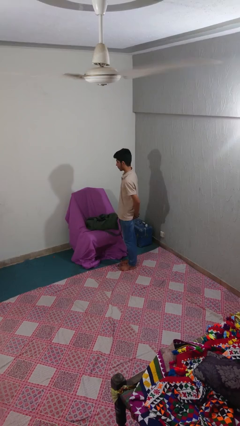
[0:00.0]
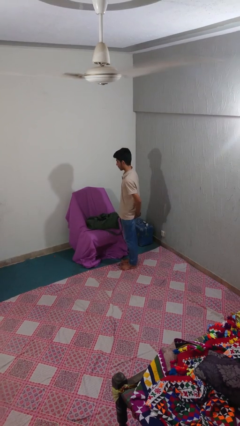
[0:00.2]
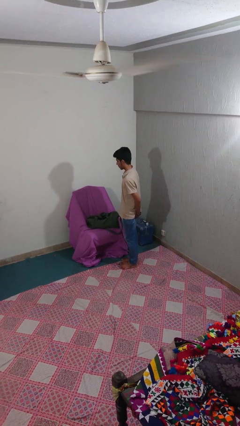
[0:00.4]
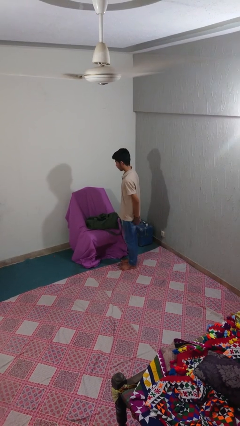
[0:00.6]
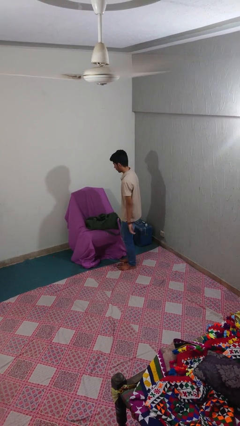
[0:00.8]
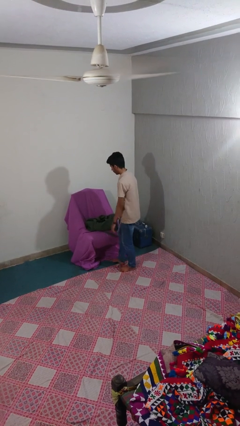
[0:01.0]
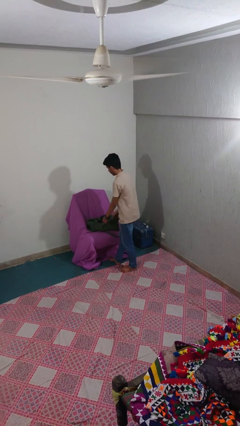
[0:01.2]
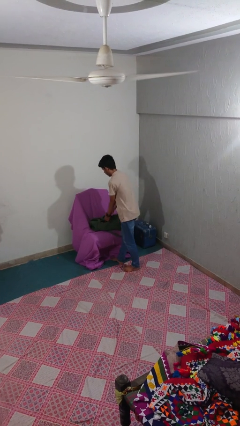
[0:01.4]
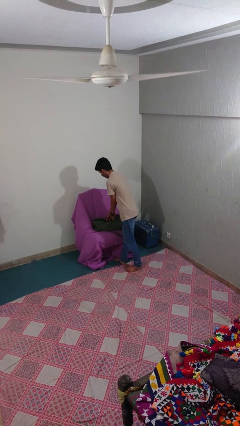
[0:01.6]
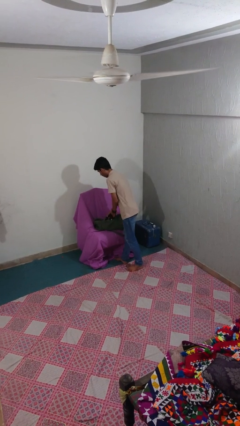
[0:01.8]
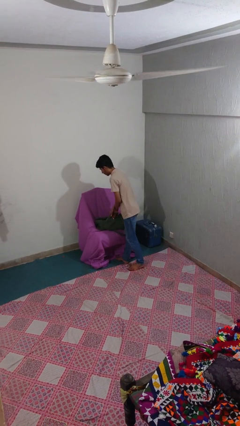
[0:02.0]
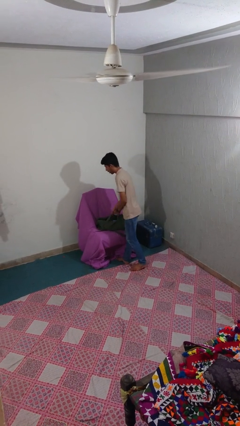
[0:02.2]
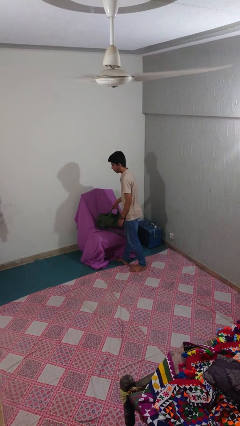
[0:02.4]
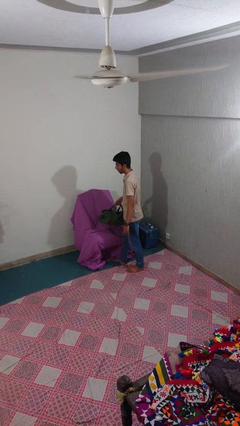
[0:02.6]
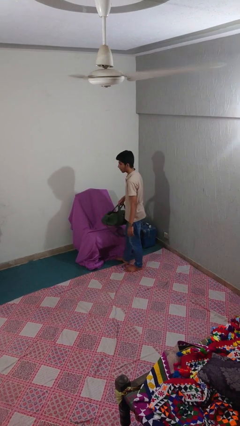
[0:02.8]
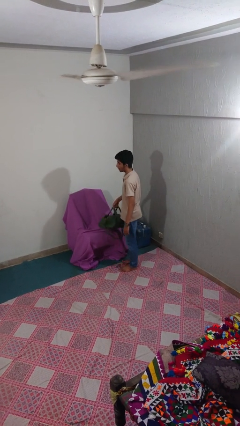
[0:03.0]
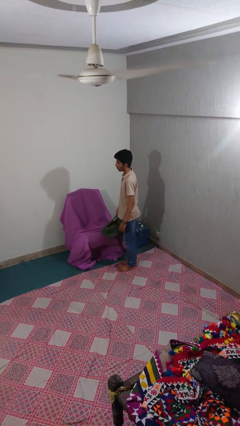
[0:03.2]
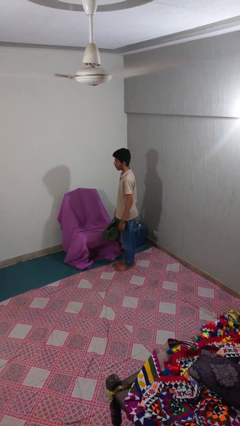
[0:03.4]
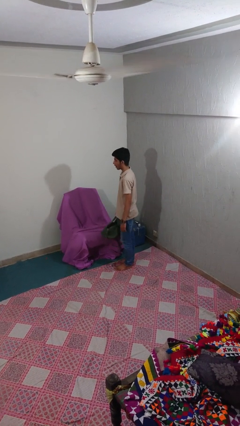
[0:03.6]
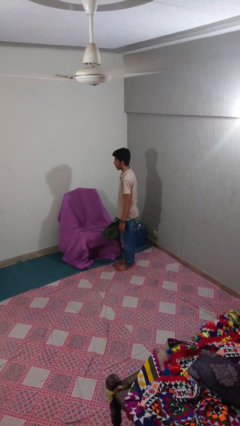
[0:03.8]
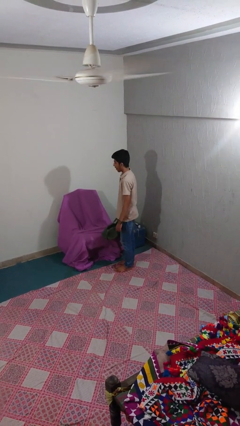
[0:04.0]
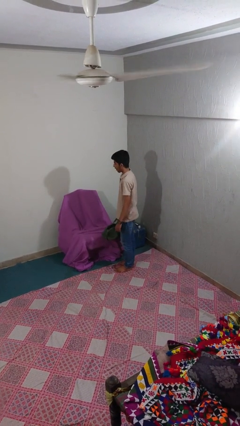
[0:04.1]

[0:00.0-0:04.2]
person picks up object from couch

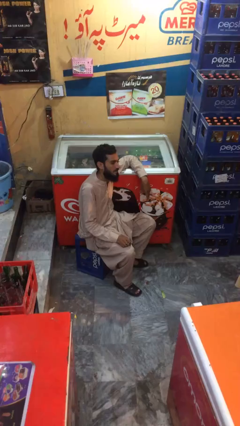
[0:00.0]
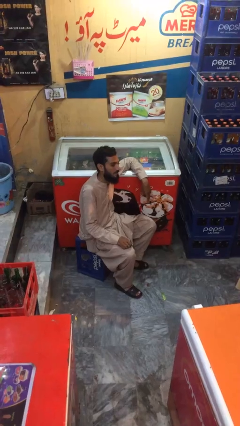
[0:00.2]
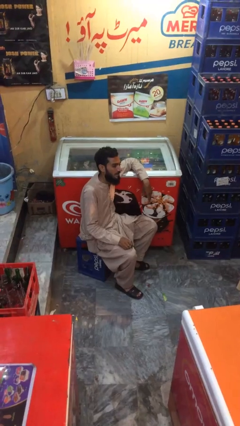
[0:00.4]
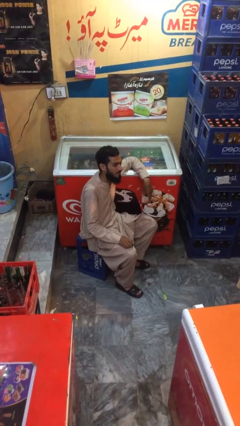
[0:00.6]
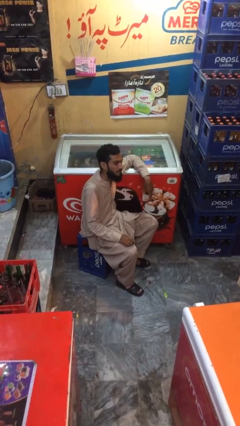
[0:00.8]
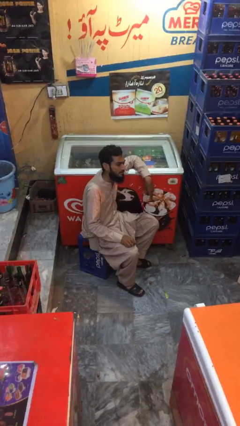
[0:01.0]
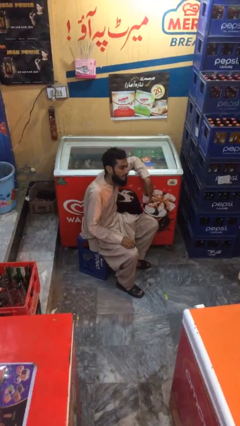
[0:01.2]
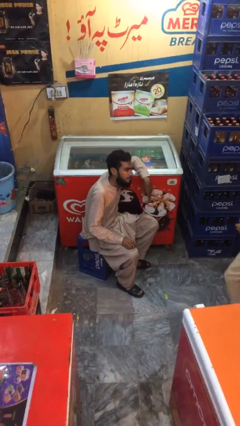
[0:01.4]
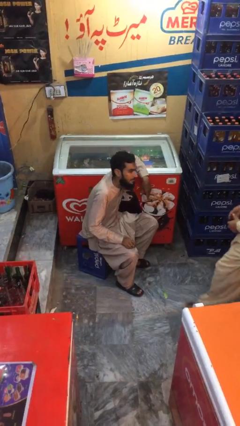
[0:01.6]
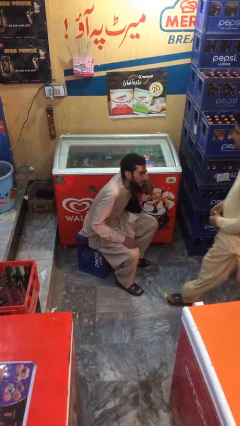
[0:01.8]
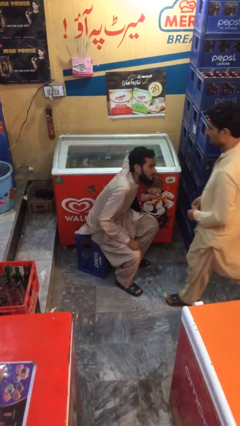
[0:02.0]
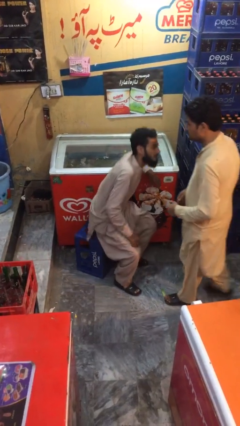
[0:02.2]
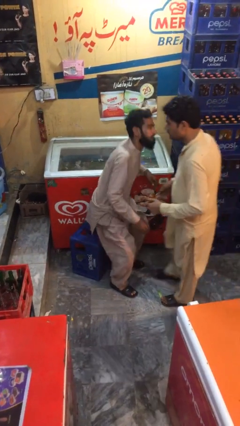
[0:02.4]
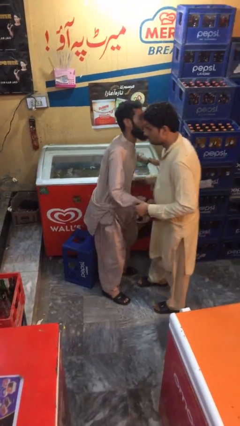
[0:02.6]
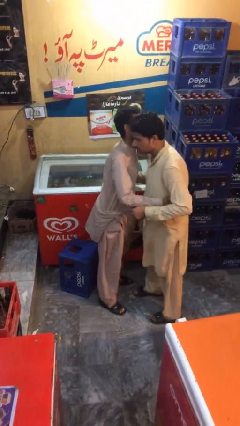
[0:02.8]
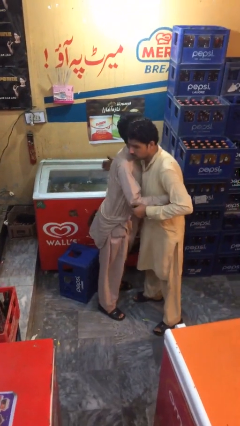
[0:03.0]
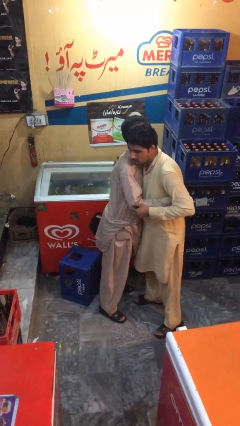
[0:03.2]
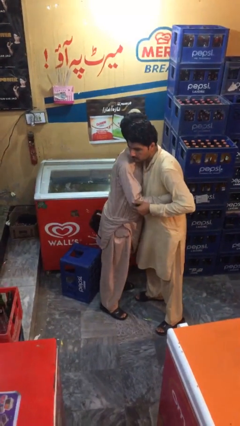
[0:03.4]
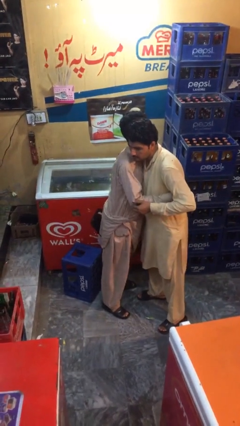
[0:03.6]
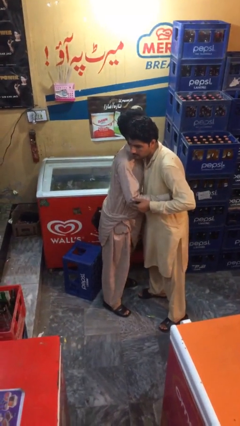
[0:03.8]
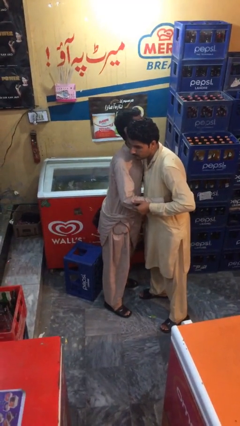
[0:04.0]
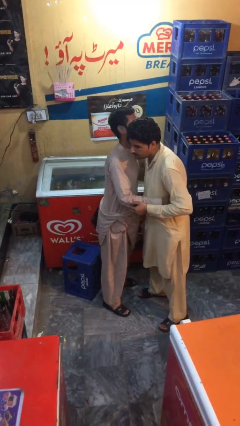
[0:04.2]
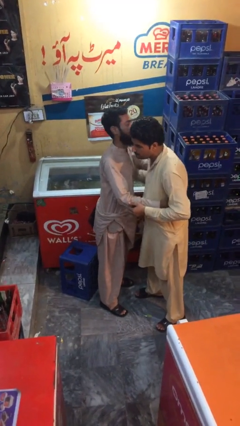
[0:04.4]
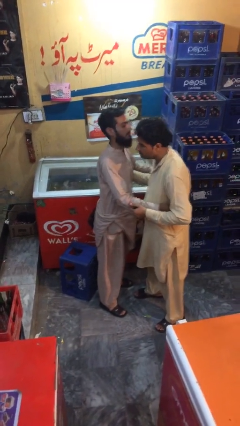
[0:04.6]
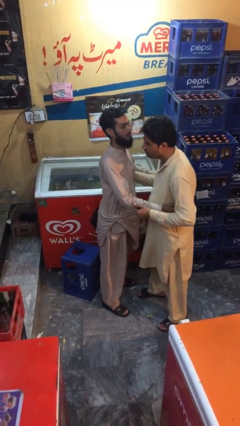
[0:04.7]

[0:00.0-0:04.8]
person embraces person

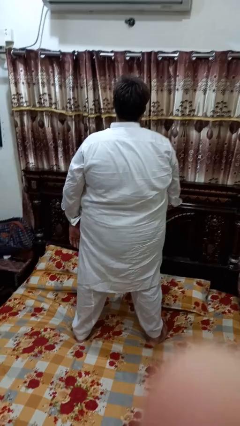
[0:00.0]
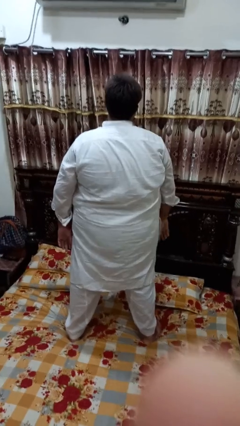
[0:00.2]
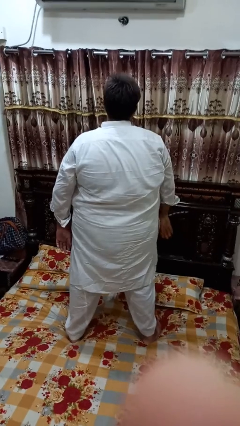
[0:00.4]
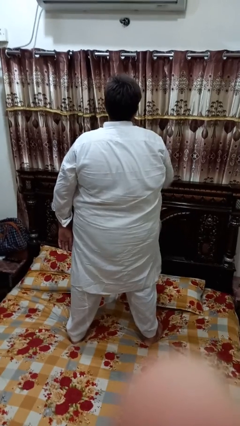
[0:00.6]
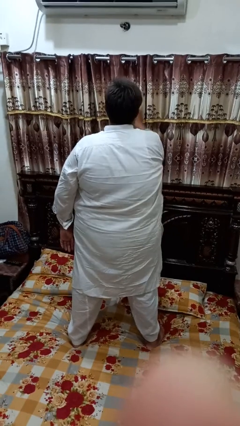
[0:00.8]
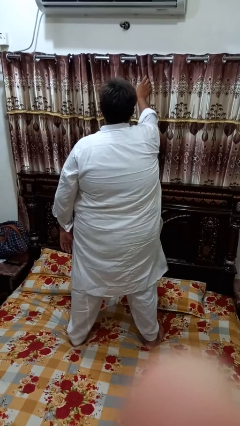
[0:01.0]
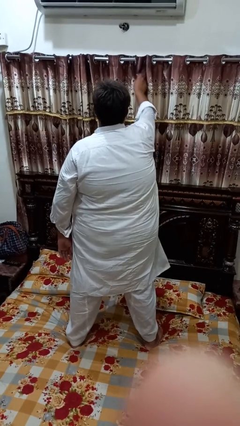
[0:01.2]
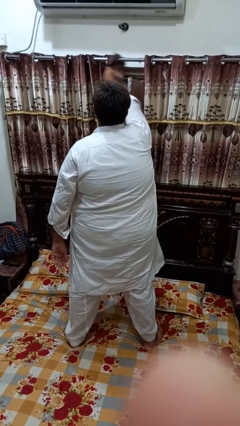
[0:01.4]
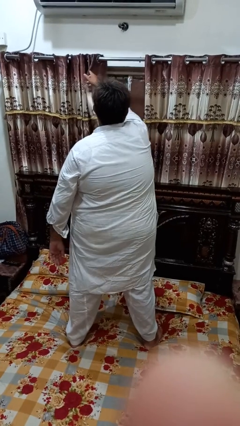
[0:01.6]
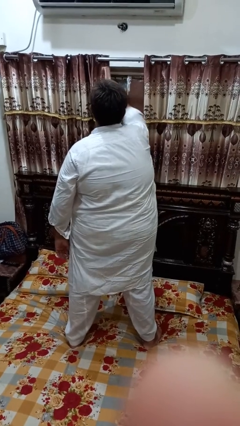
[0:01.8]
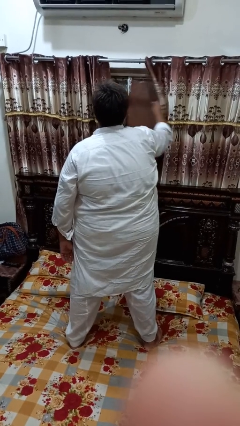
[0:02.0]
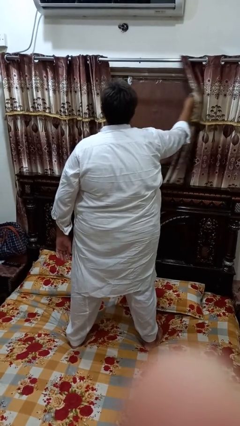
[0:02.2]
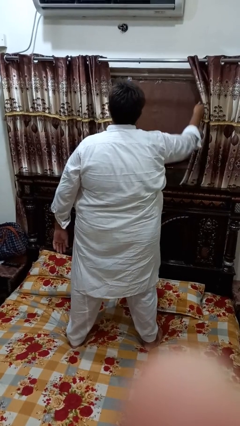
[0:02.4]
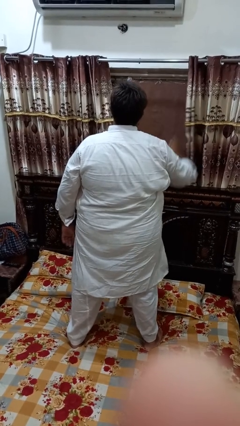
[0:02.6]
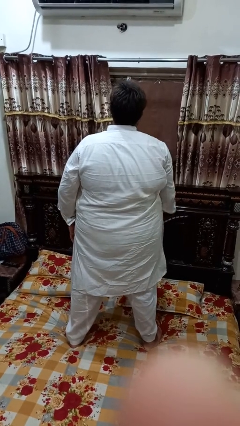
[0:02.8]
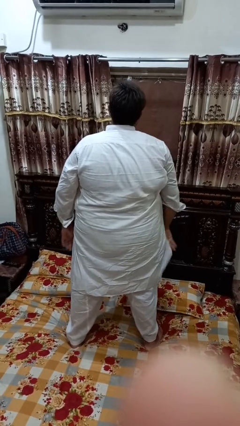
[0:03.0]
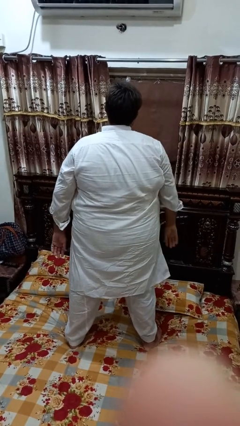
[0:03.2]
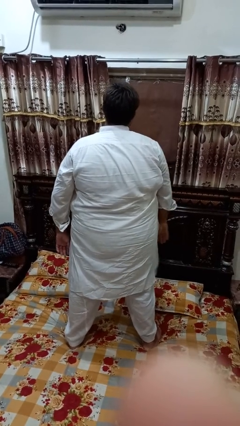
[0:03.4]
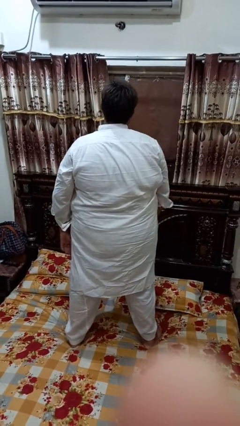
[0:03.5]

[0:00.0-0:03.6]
person opens curtains

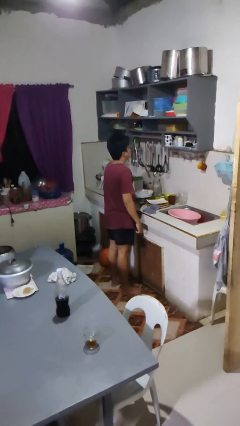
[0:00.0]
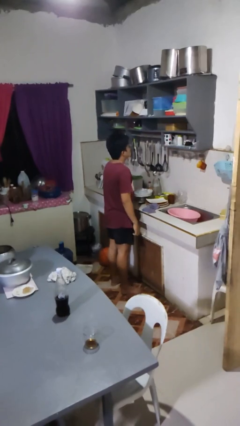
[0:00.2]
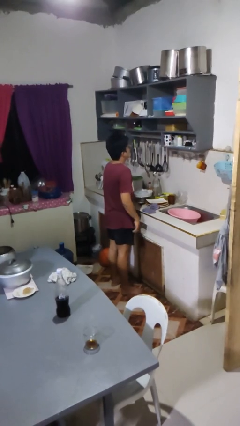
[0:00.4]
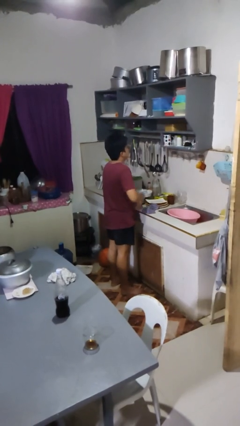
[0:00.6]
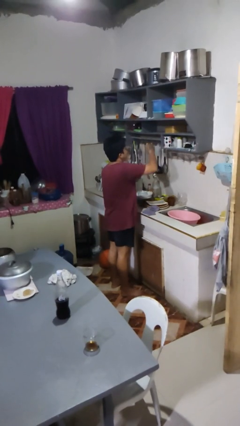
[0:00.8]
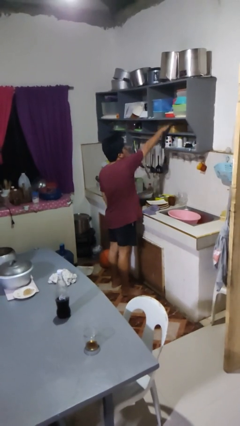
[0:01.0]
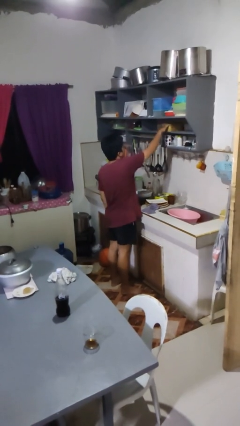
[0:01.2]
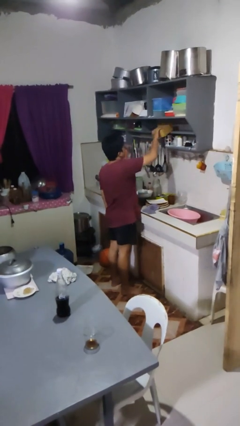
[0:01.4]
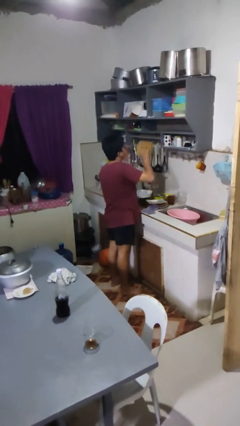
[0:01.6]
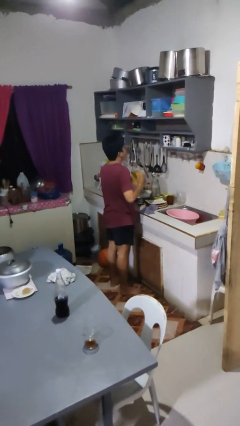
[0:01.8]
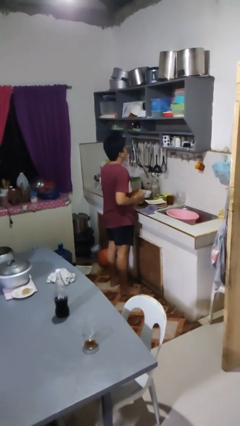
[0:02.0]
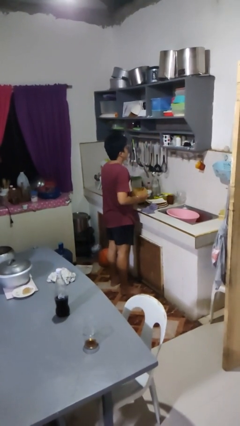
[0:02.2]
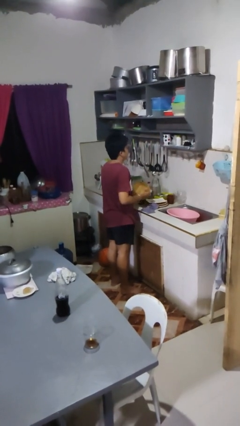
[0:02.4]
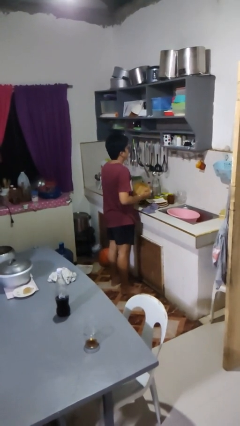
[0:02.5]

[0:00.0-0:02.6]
person takes object from cabinet

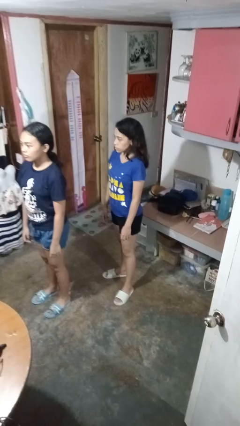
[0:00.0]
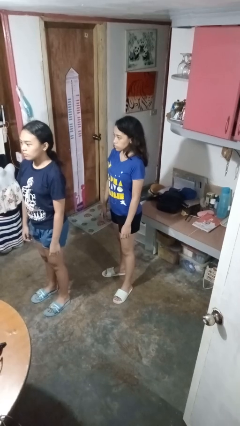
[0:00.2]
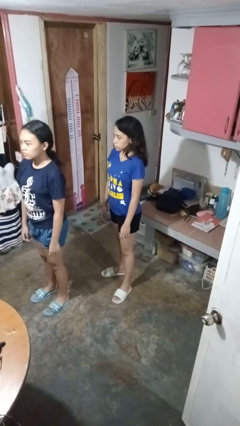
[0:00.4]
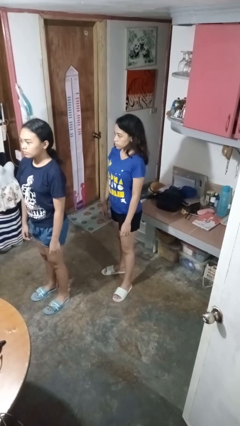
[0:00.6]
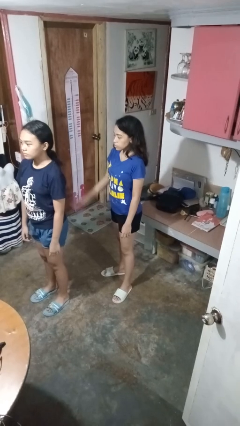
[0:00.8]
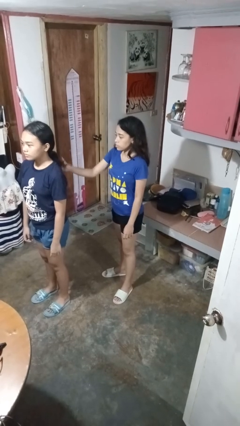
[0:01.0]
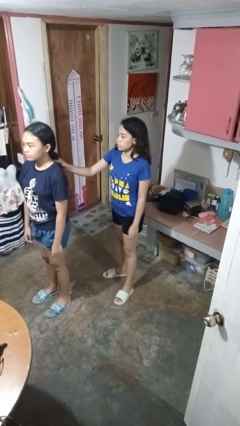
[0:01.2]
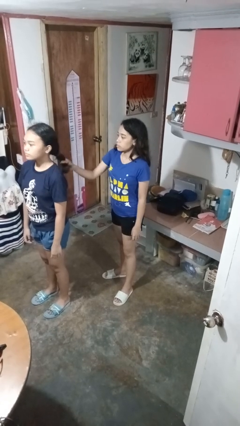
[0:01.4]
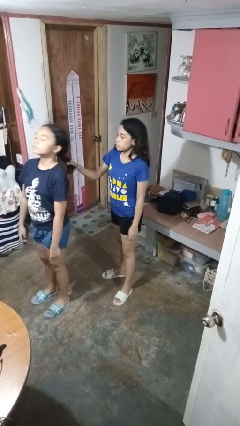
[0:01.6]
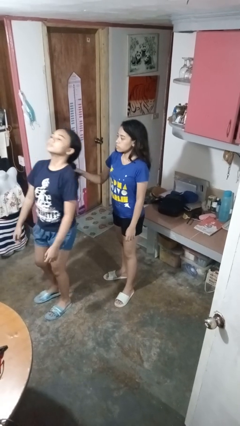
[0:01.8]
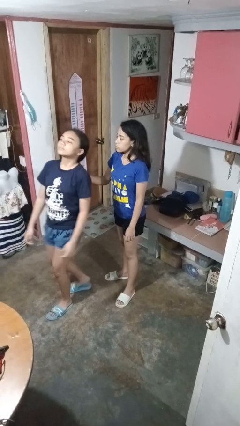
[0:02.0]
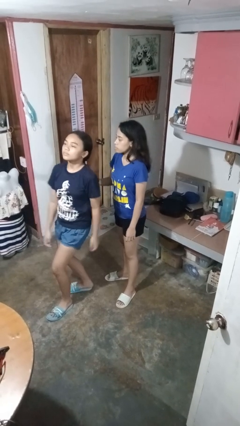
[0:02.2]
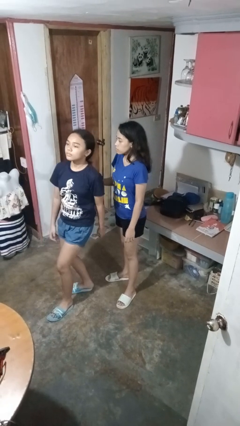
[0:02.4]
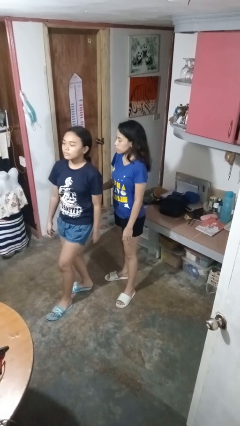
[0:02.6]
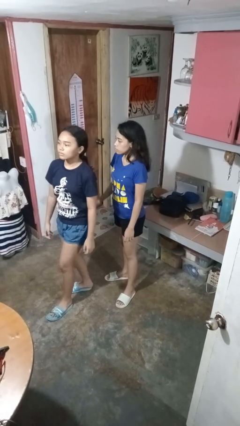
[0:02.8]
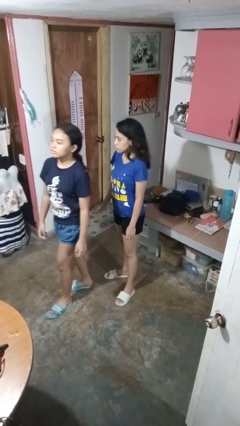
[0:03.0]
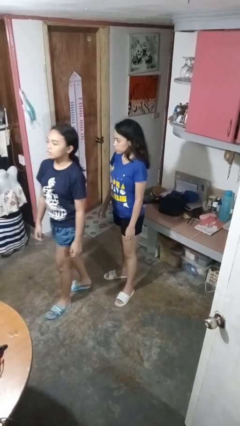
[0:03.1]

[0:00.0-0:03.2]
person grabs person by hair
